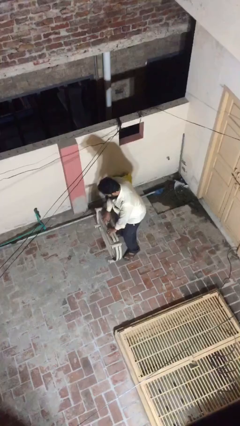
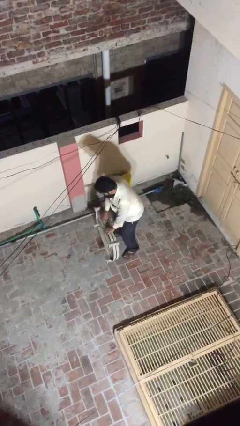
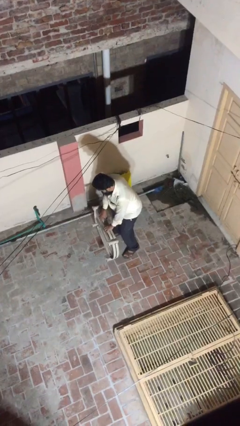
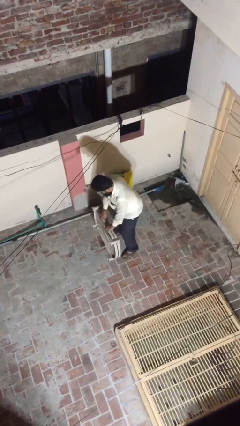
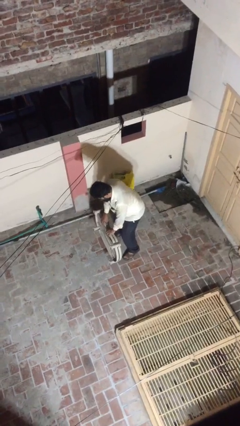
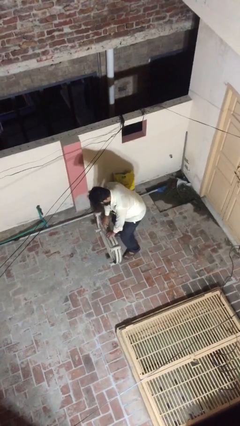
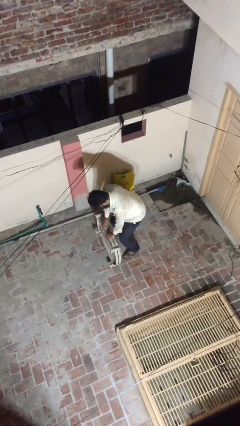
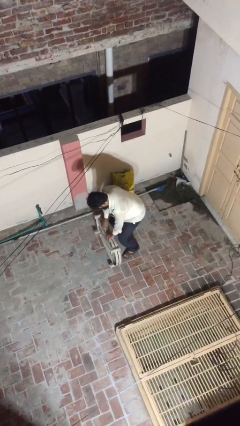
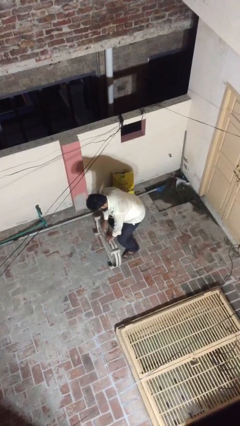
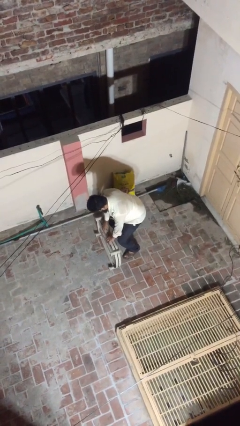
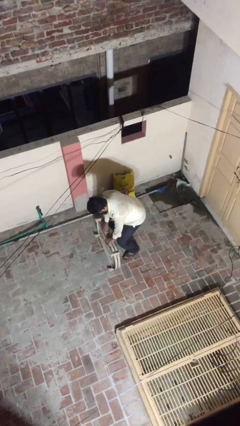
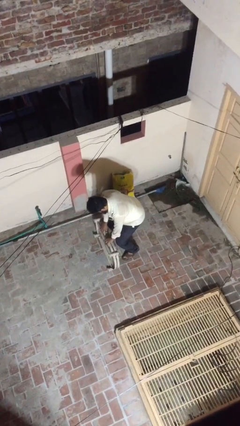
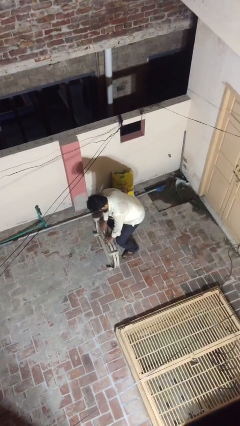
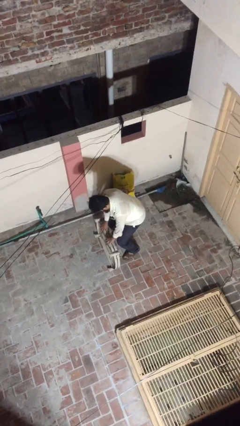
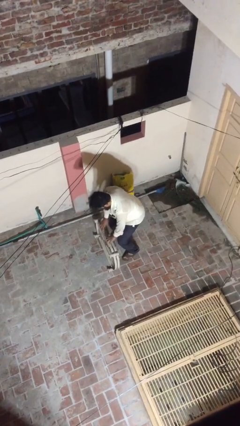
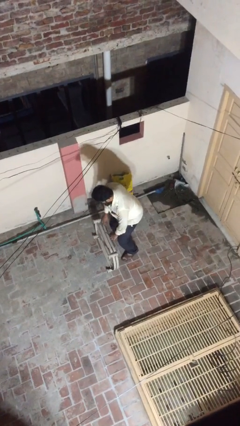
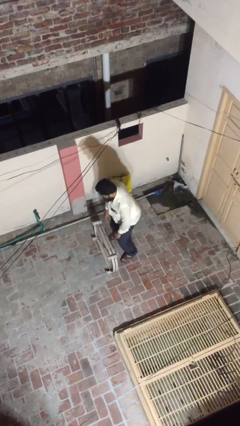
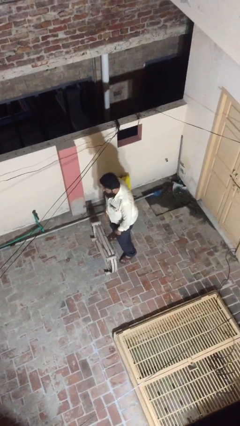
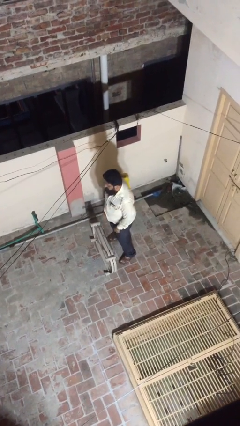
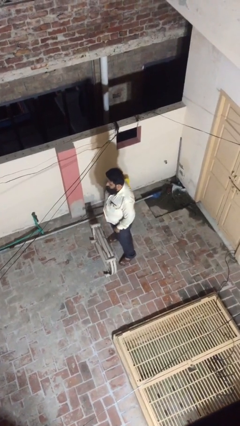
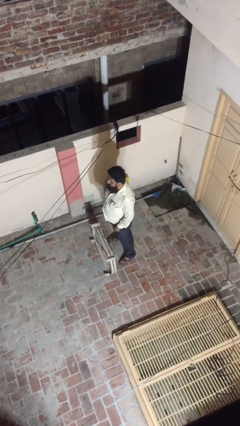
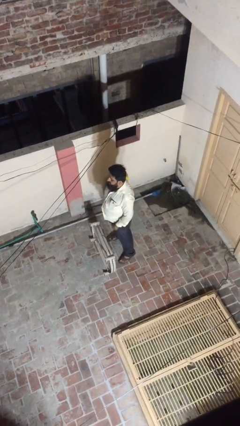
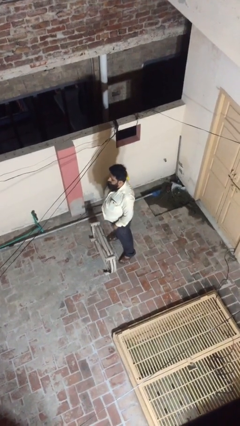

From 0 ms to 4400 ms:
person puts down object on floor

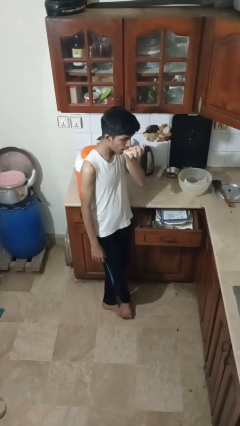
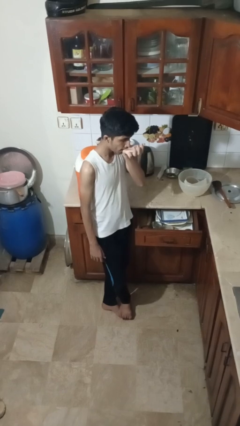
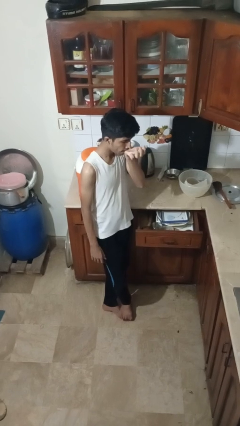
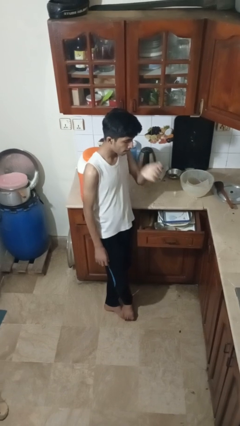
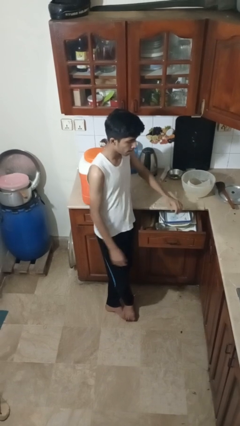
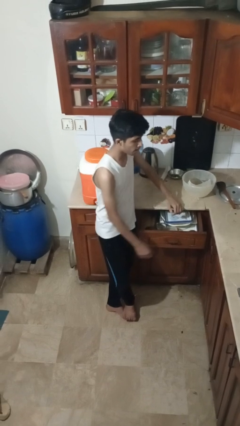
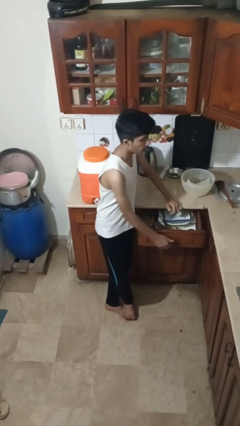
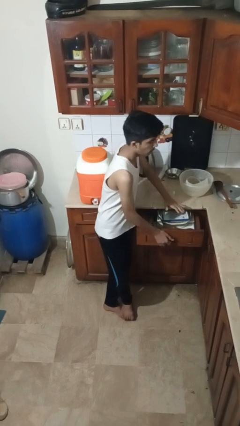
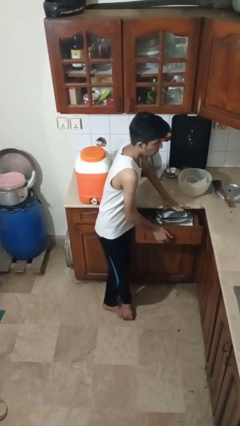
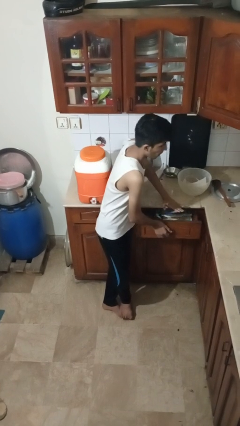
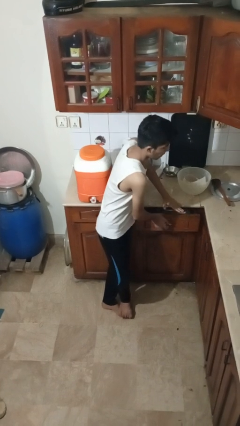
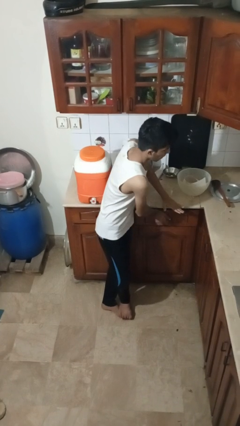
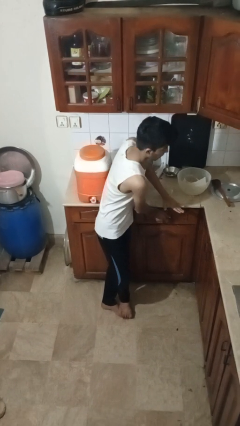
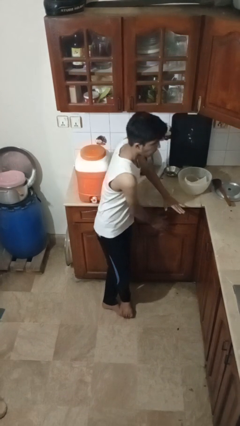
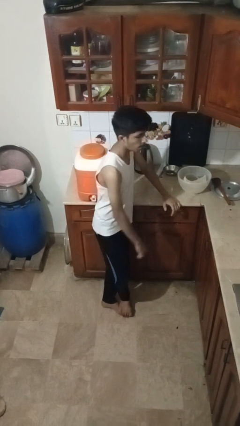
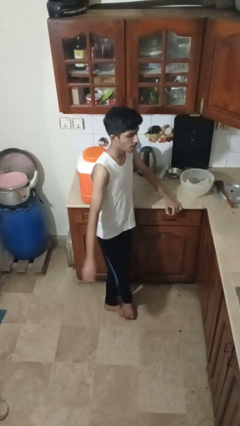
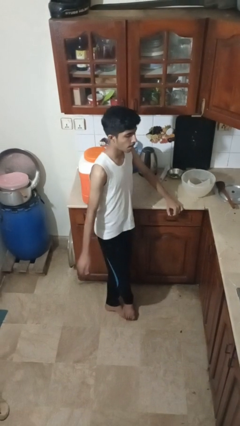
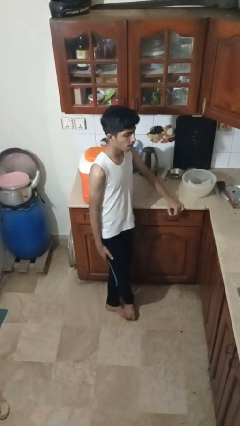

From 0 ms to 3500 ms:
person closes kitchen drawer

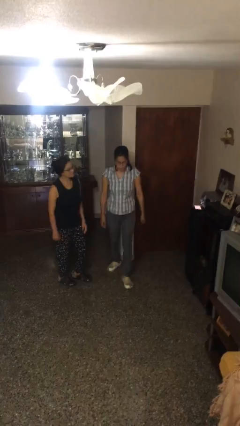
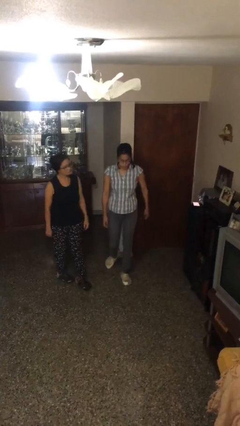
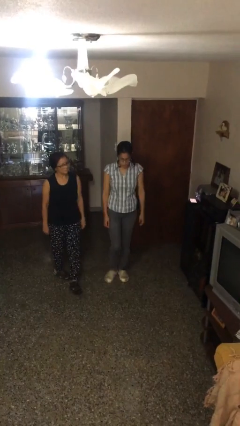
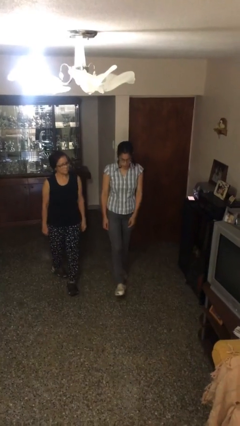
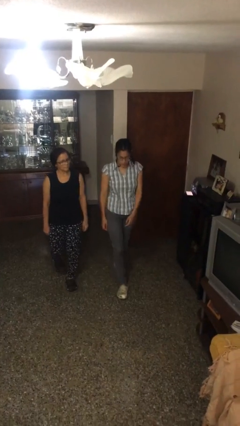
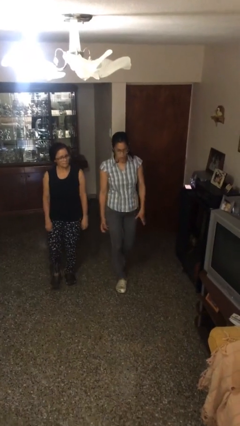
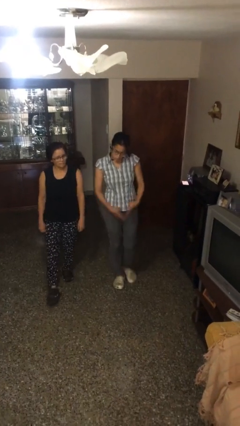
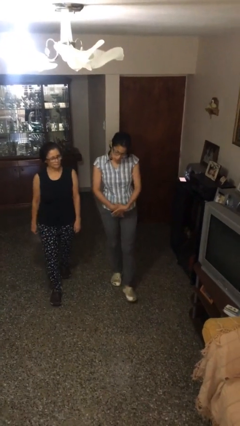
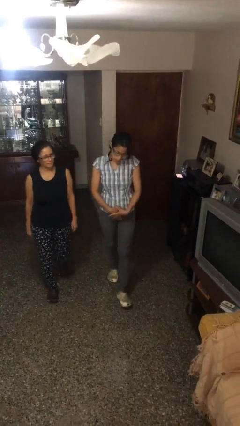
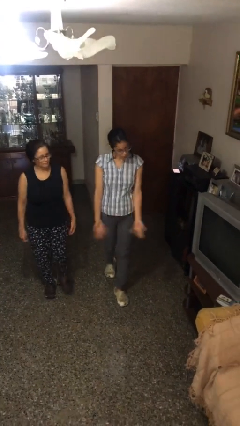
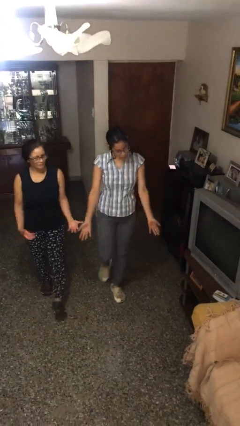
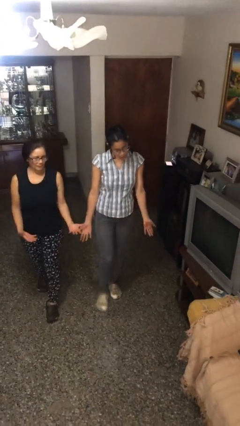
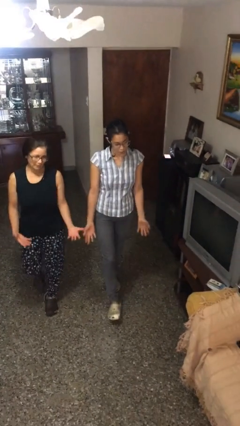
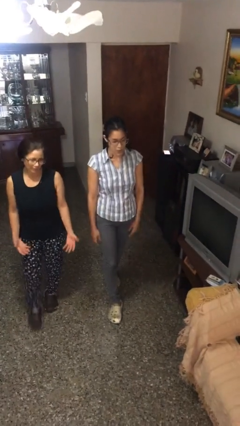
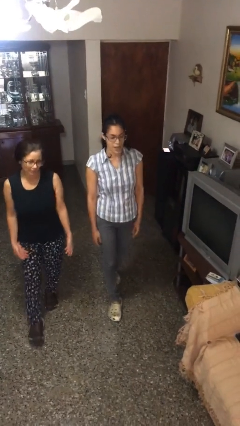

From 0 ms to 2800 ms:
person talks to person

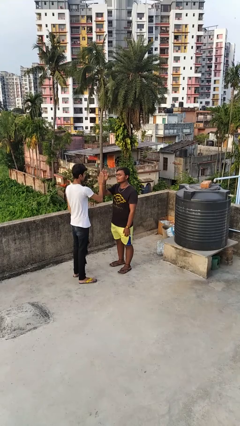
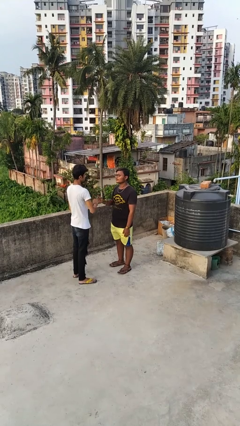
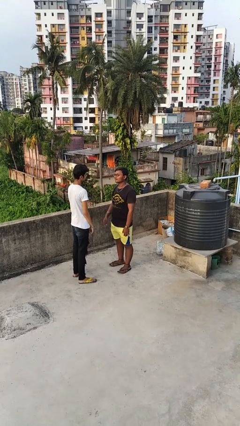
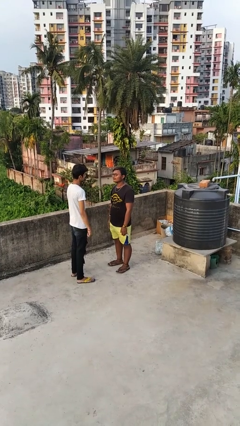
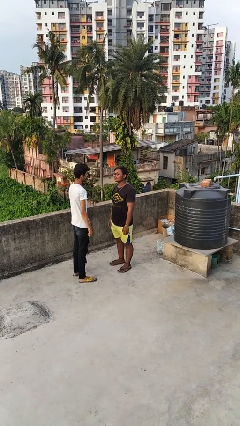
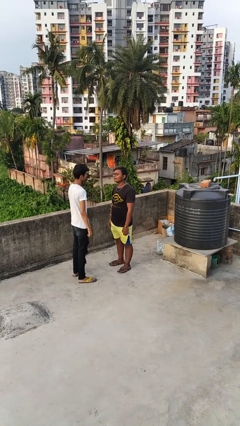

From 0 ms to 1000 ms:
person highfives hand

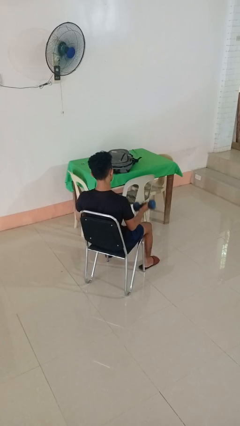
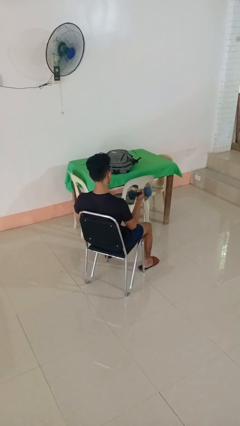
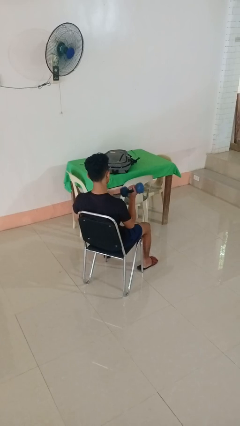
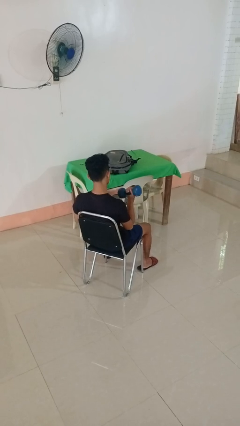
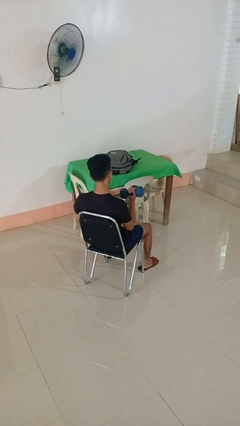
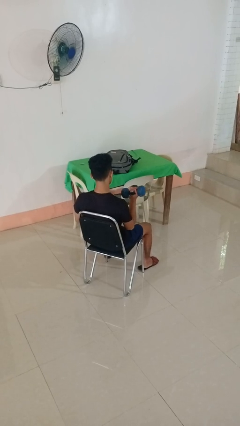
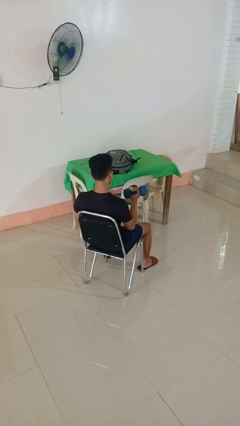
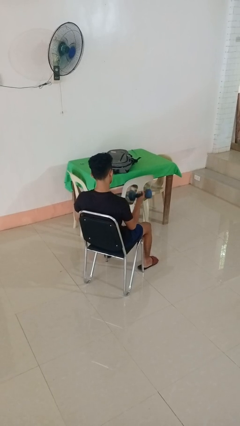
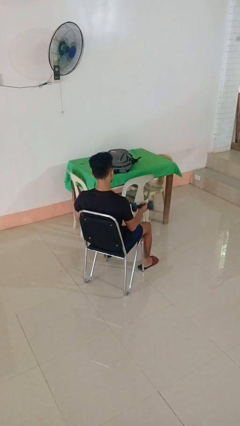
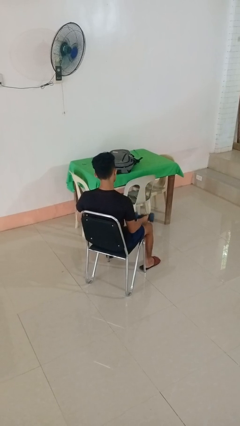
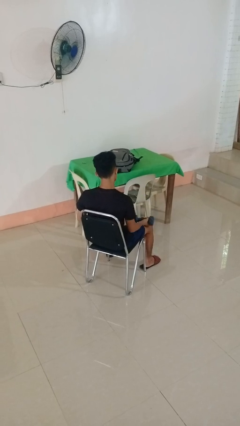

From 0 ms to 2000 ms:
person lifts dumbbells

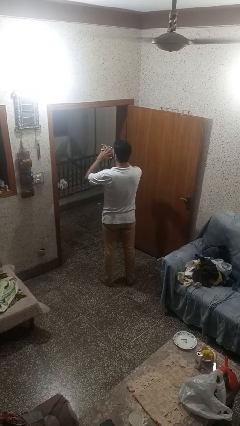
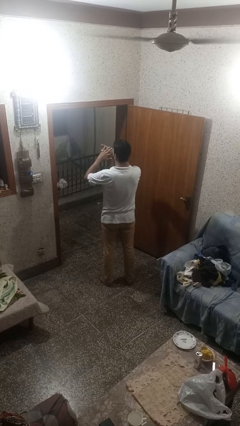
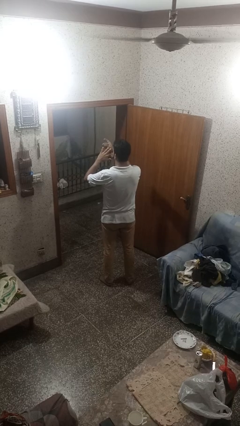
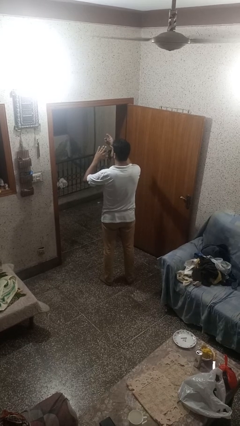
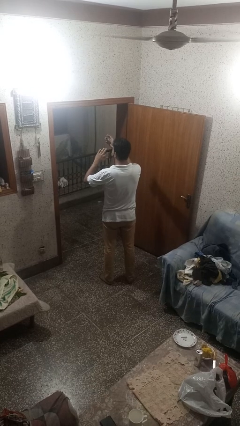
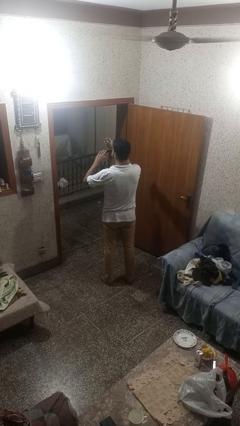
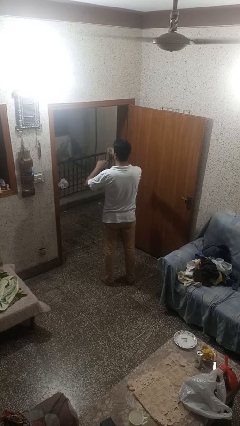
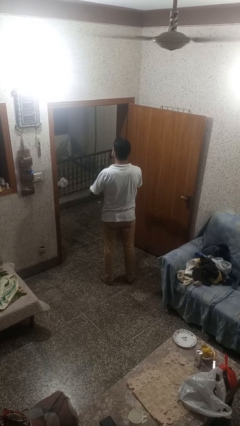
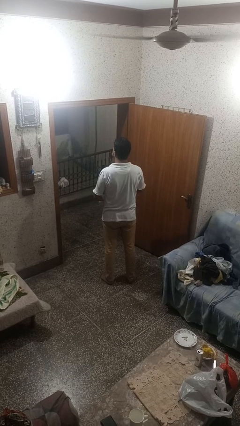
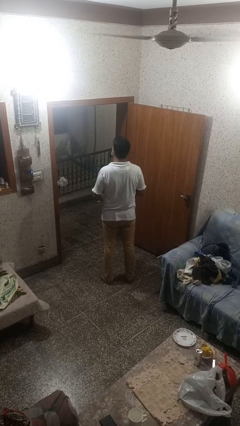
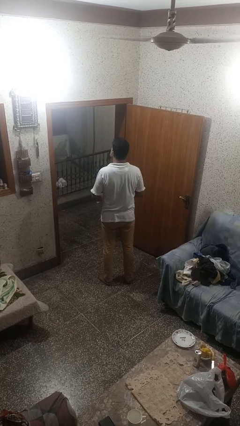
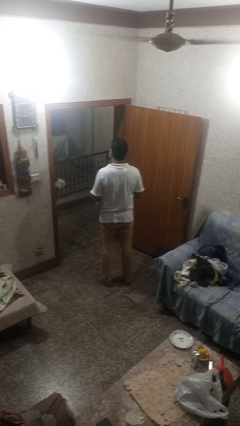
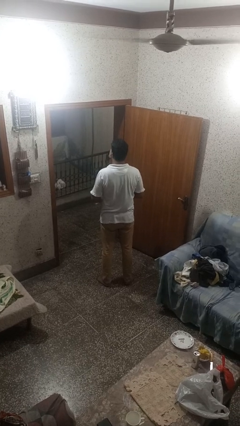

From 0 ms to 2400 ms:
person takes off ring

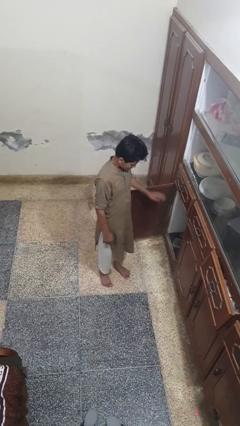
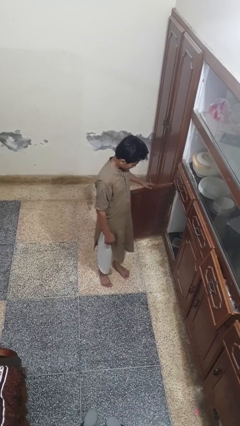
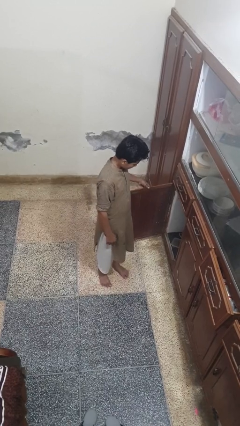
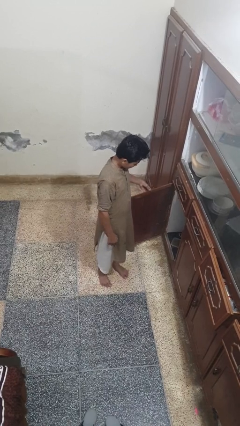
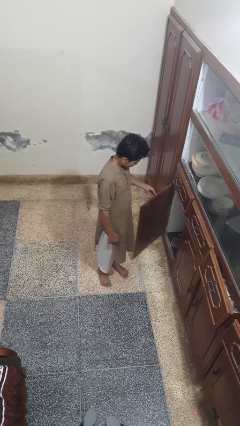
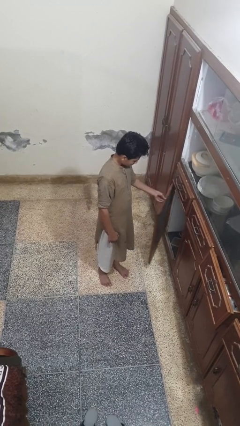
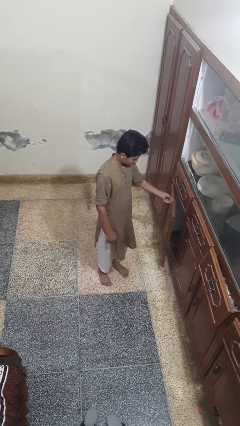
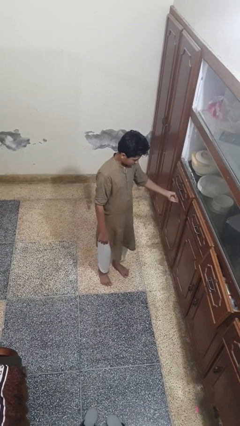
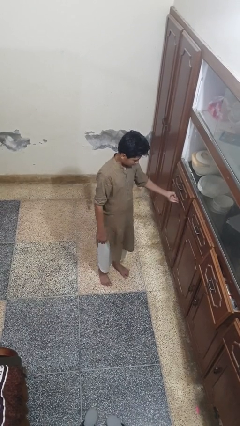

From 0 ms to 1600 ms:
person closes cabinet
